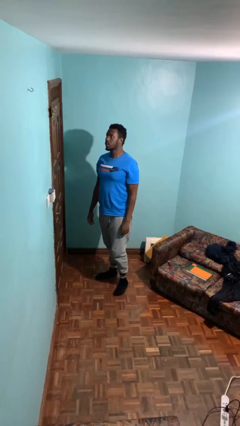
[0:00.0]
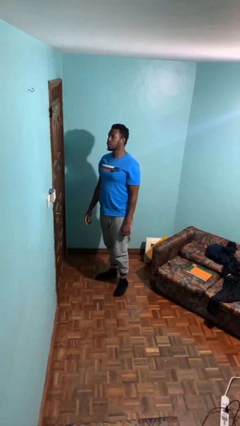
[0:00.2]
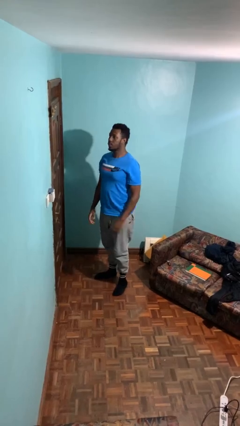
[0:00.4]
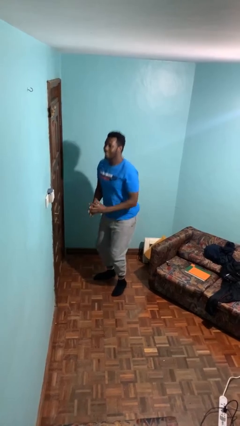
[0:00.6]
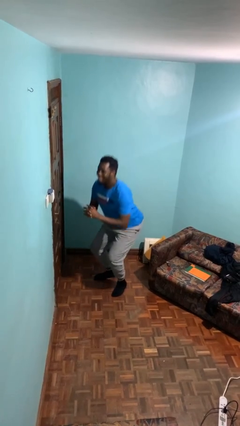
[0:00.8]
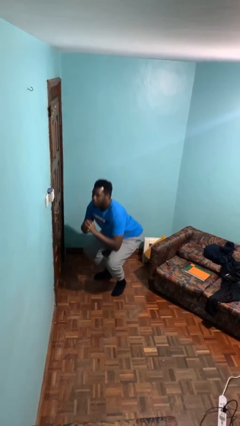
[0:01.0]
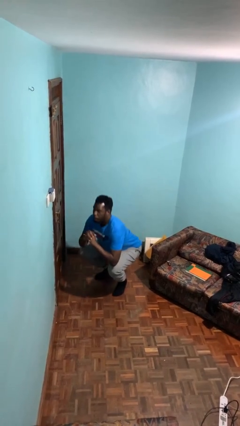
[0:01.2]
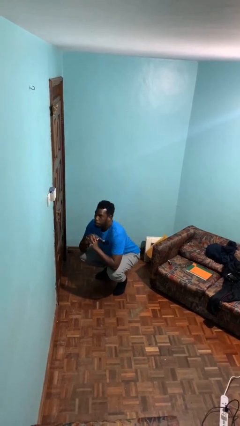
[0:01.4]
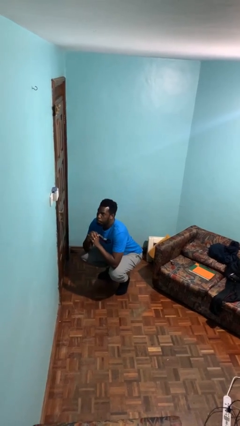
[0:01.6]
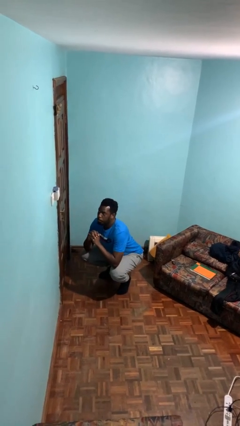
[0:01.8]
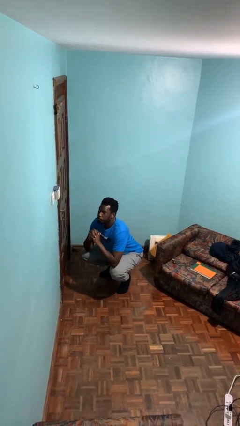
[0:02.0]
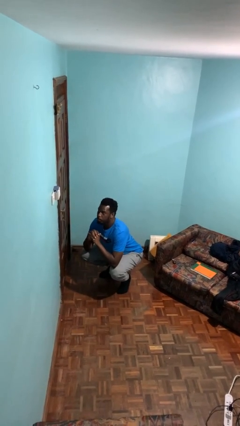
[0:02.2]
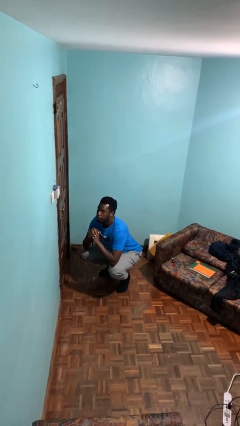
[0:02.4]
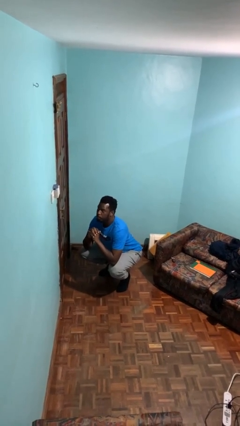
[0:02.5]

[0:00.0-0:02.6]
person squats

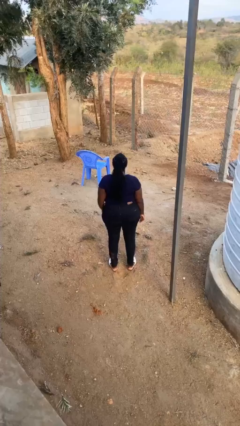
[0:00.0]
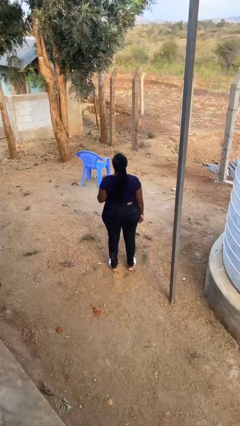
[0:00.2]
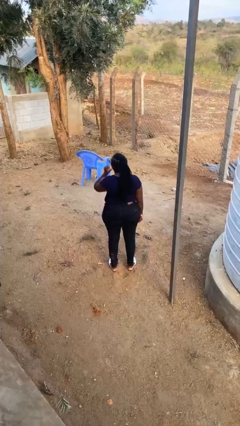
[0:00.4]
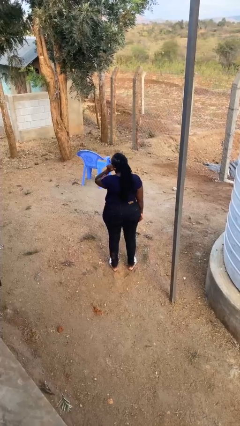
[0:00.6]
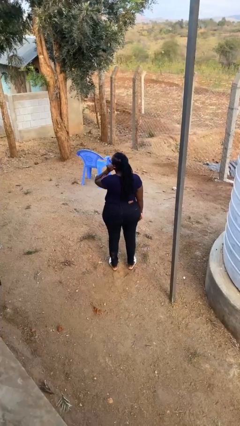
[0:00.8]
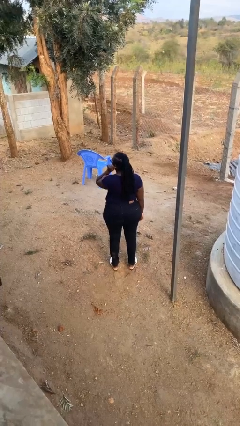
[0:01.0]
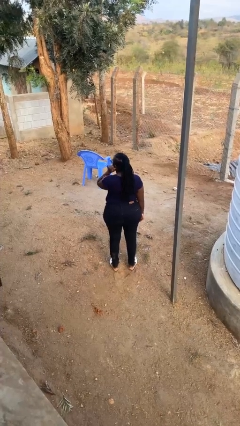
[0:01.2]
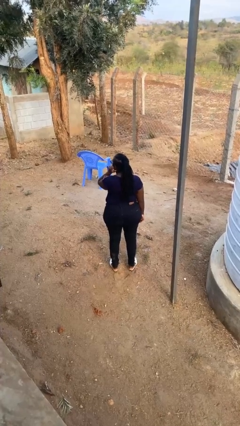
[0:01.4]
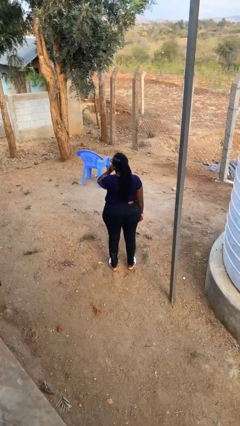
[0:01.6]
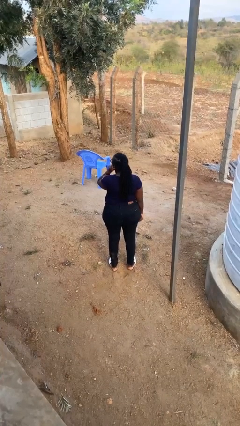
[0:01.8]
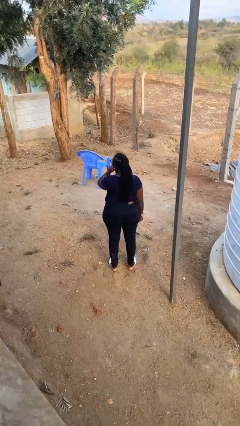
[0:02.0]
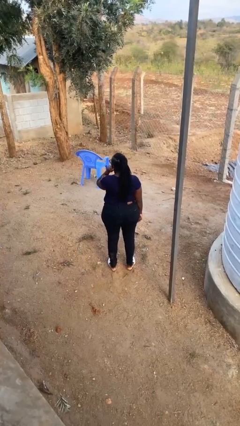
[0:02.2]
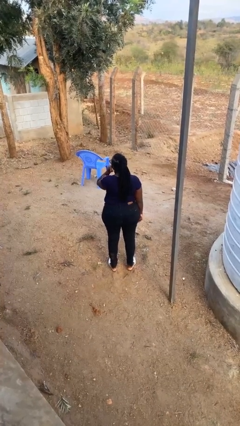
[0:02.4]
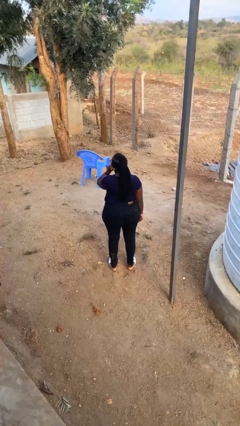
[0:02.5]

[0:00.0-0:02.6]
person touches earlobe

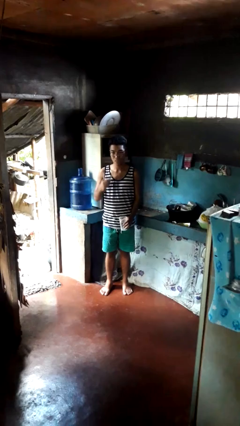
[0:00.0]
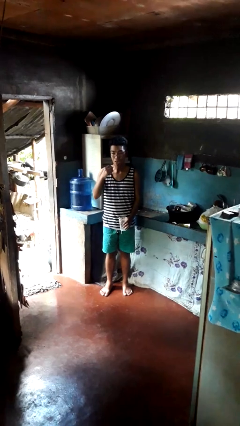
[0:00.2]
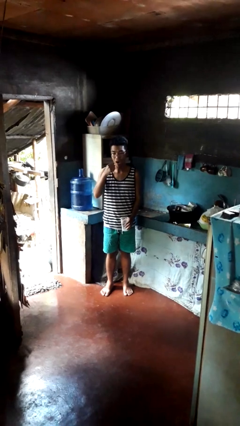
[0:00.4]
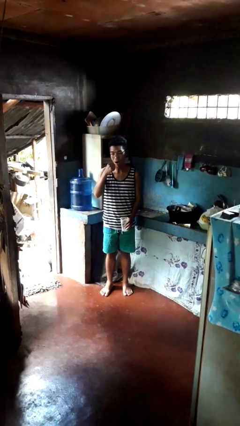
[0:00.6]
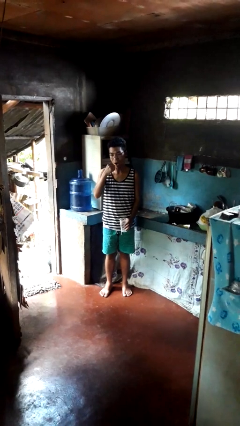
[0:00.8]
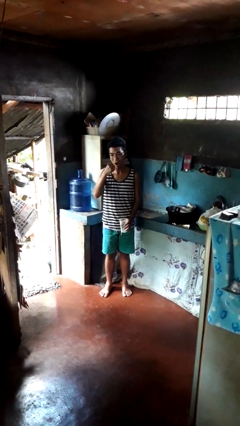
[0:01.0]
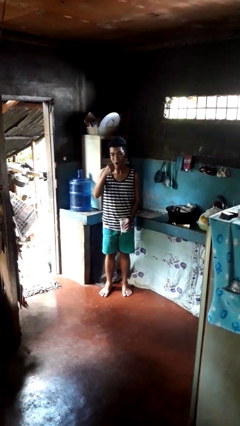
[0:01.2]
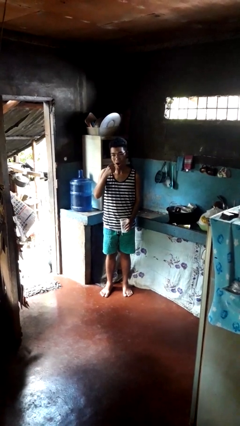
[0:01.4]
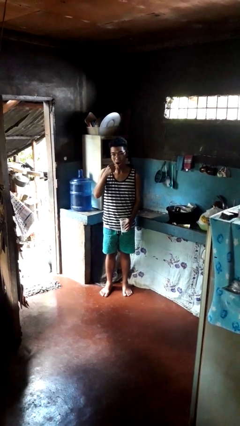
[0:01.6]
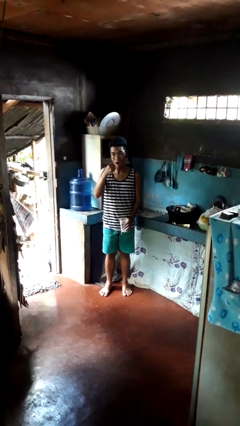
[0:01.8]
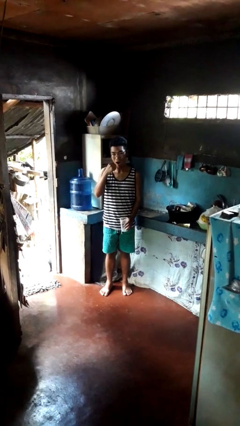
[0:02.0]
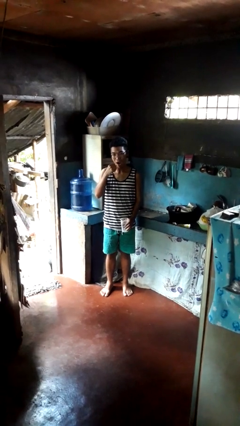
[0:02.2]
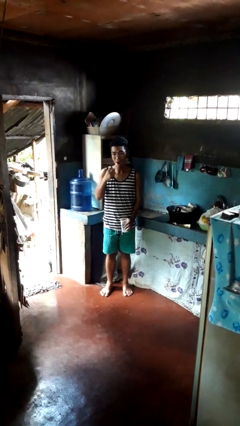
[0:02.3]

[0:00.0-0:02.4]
person brushes teeth

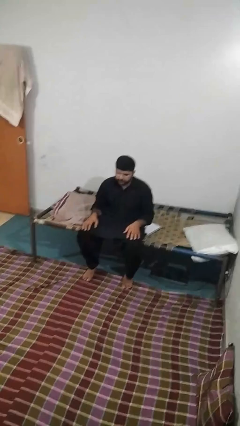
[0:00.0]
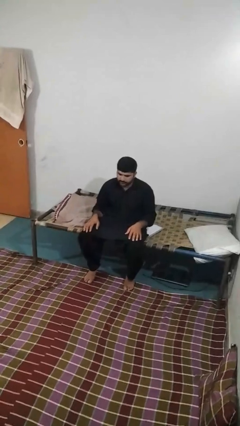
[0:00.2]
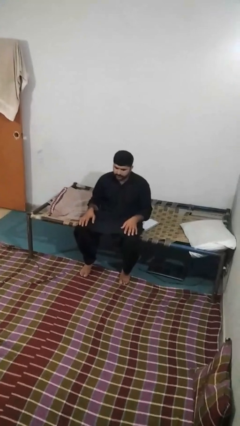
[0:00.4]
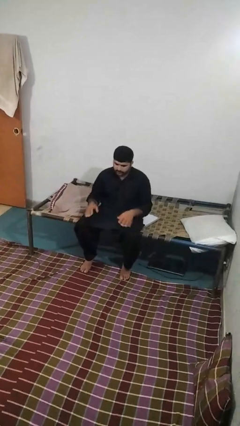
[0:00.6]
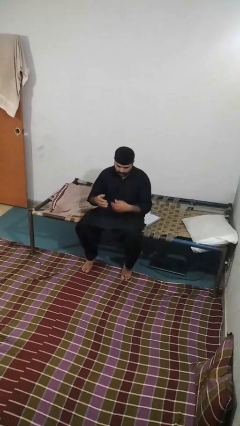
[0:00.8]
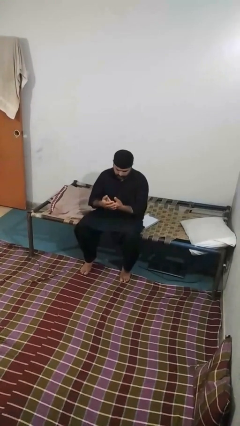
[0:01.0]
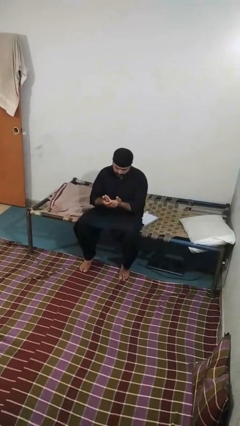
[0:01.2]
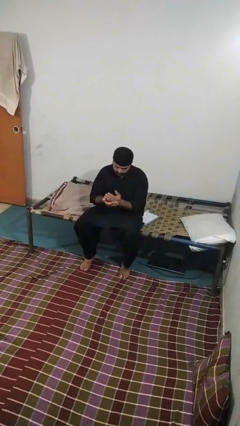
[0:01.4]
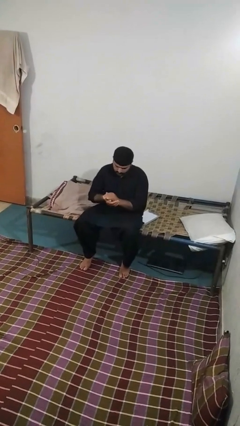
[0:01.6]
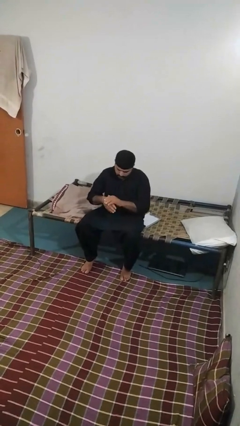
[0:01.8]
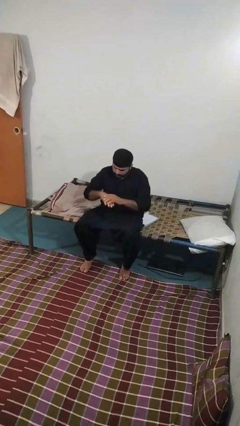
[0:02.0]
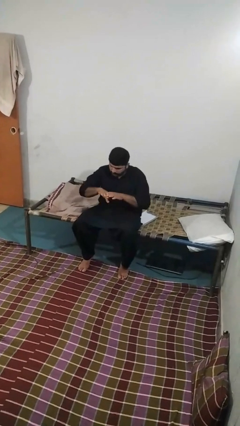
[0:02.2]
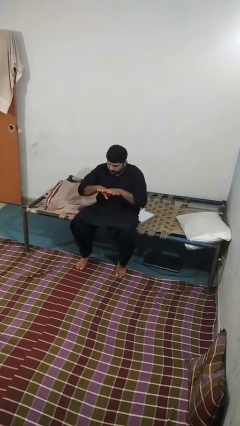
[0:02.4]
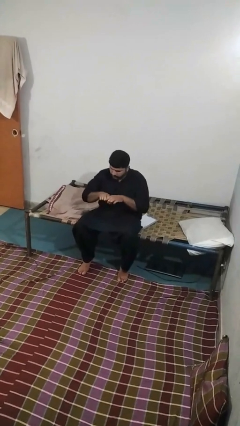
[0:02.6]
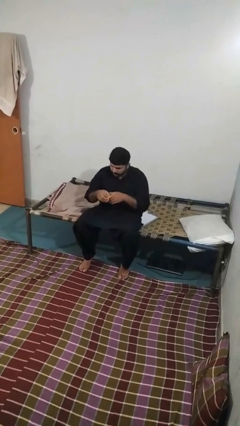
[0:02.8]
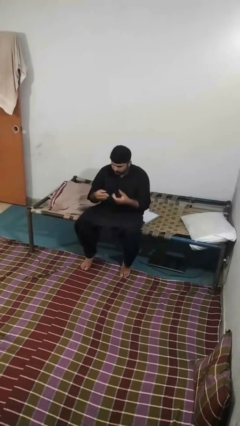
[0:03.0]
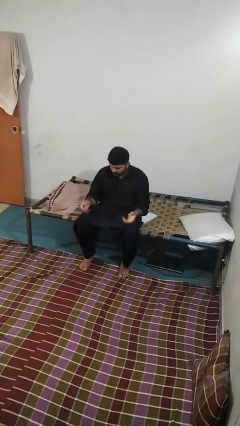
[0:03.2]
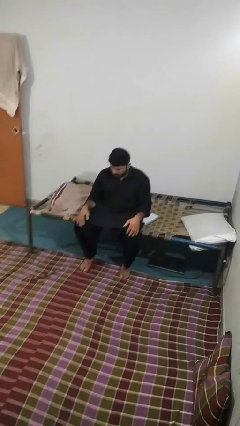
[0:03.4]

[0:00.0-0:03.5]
person looks at hands in lap

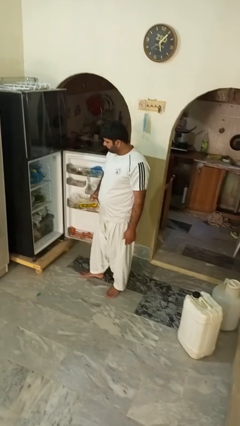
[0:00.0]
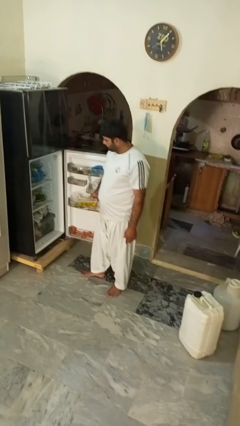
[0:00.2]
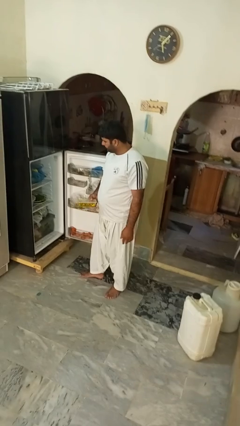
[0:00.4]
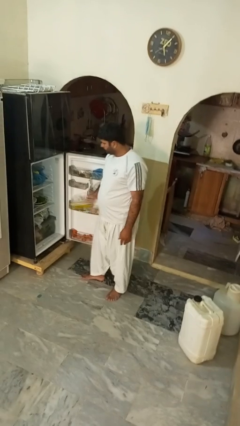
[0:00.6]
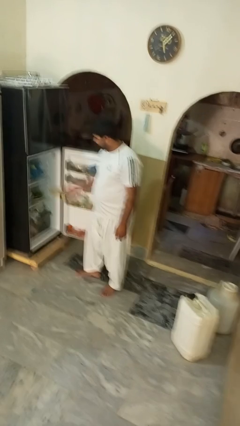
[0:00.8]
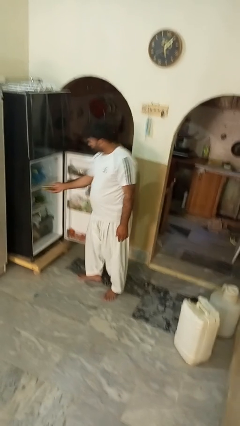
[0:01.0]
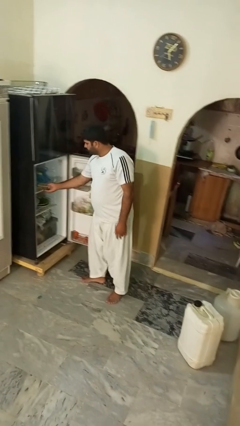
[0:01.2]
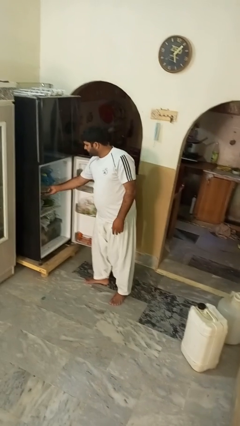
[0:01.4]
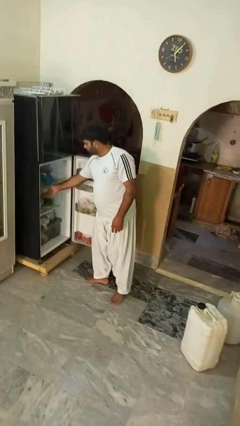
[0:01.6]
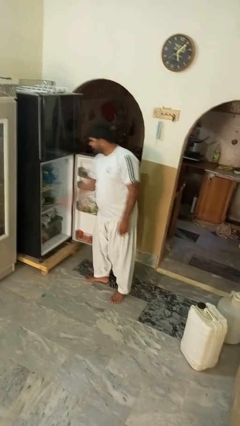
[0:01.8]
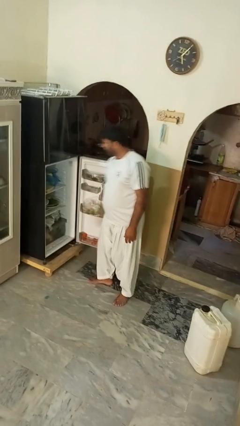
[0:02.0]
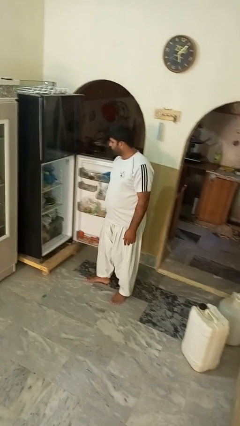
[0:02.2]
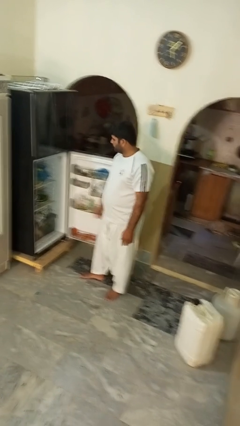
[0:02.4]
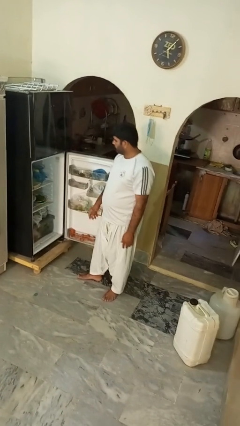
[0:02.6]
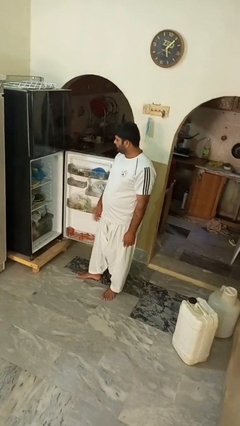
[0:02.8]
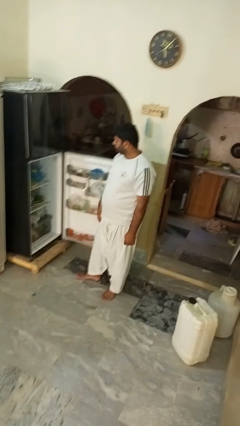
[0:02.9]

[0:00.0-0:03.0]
person puts object into refrigerator

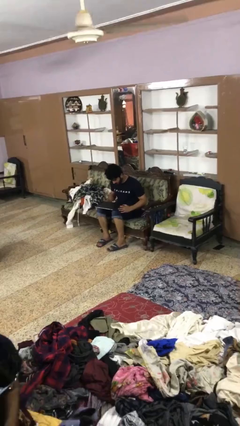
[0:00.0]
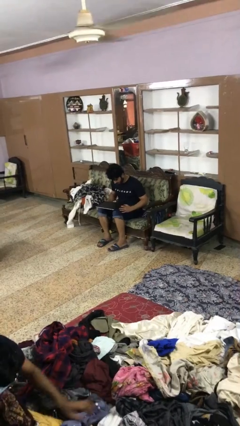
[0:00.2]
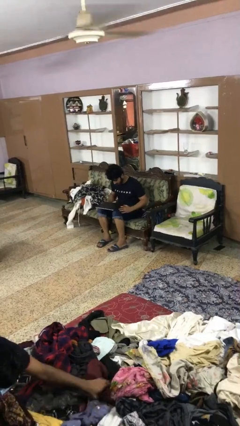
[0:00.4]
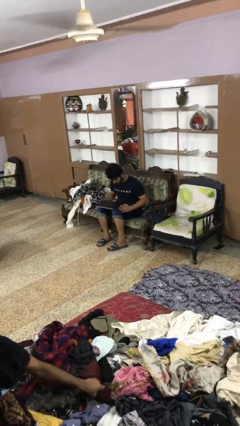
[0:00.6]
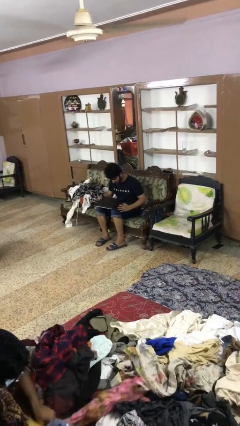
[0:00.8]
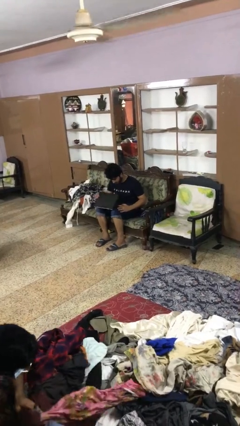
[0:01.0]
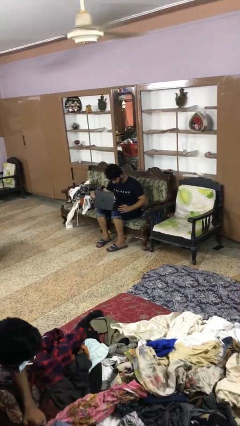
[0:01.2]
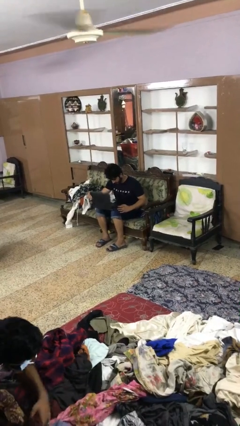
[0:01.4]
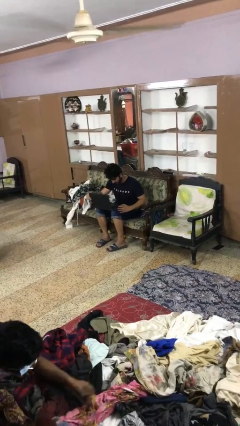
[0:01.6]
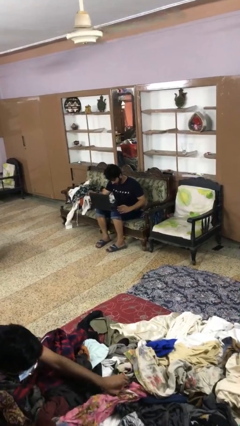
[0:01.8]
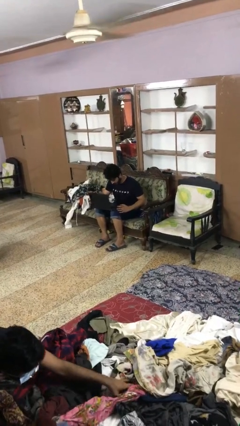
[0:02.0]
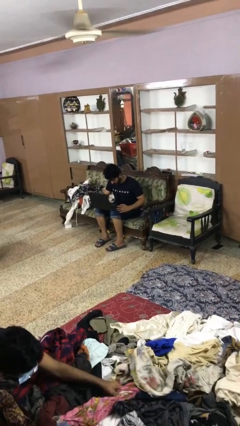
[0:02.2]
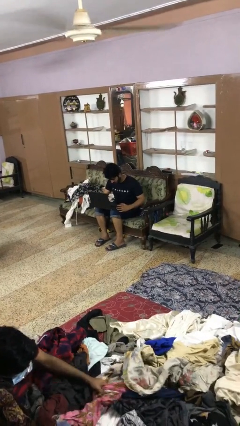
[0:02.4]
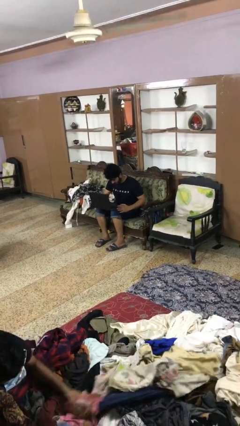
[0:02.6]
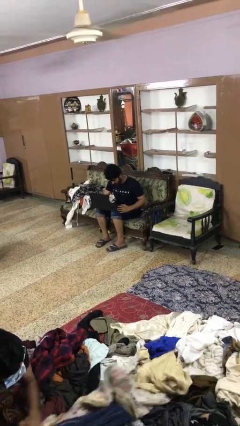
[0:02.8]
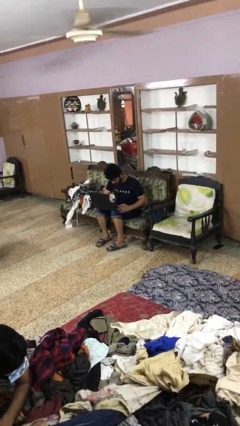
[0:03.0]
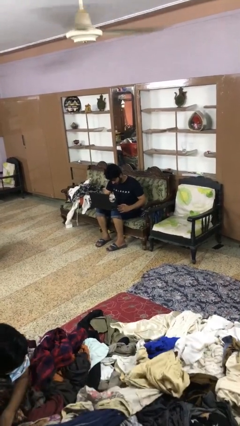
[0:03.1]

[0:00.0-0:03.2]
person opens laptop
